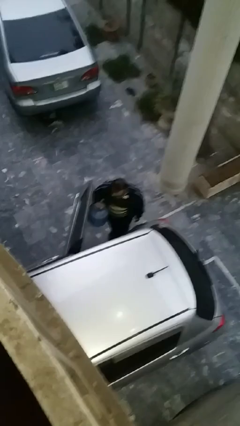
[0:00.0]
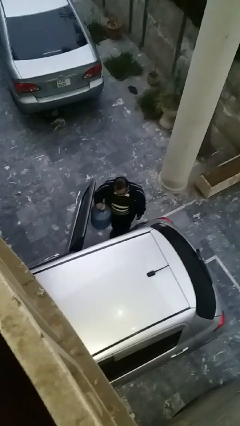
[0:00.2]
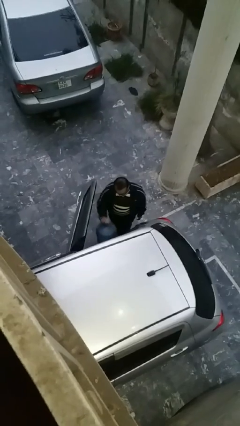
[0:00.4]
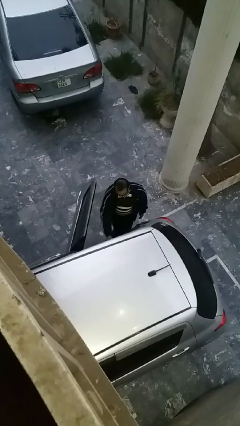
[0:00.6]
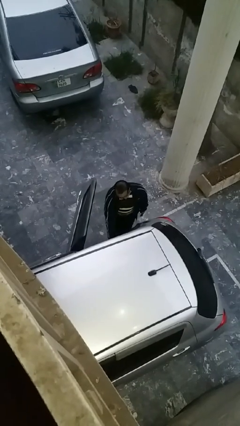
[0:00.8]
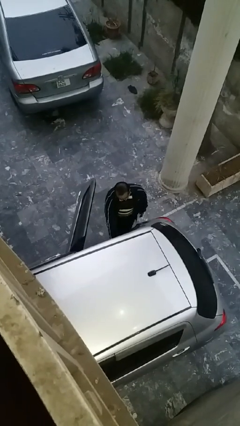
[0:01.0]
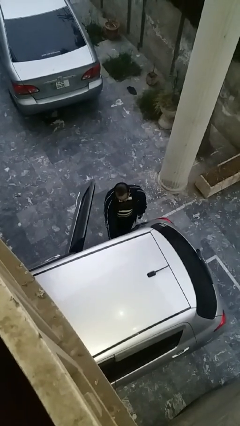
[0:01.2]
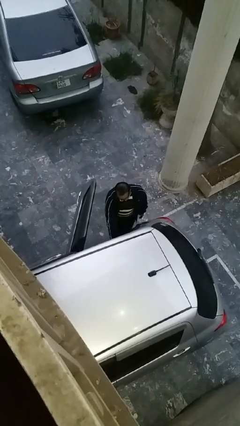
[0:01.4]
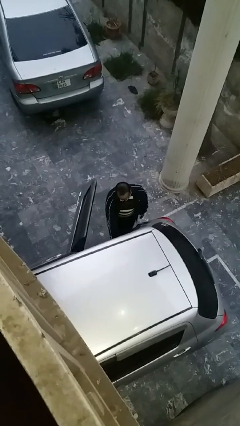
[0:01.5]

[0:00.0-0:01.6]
person loads car

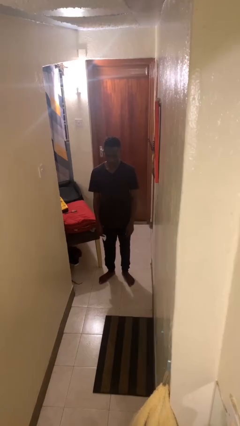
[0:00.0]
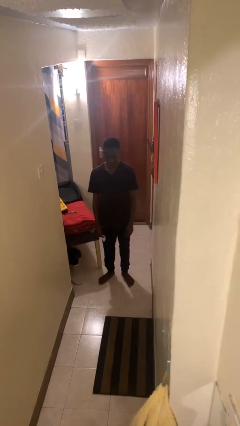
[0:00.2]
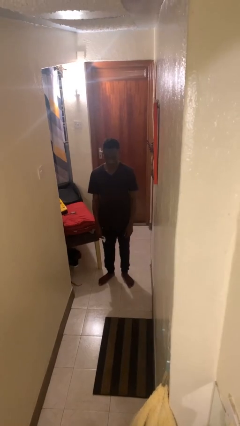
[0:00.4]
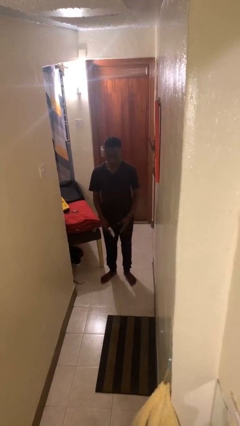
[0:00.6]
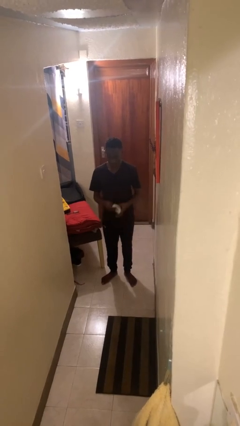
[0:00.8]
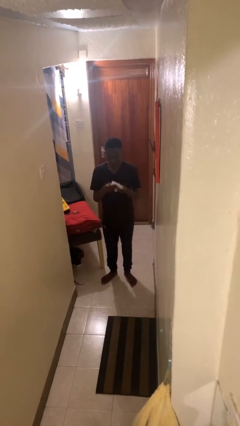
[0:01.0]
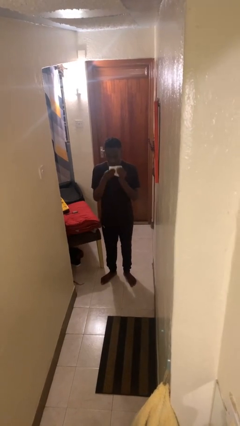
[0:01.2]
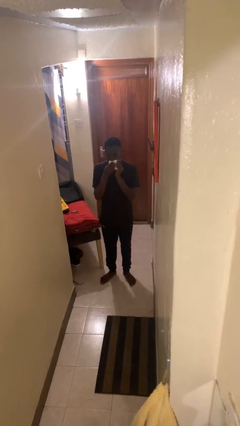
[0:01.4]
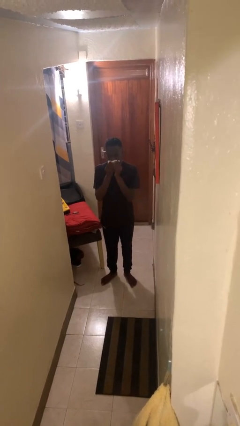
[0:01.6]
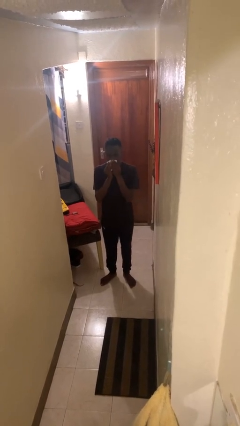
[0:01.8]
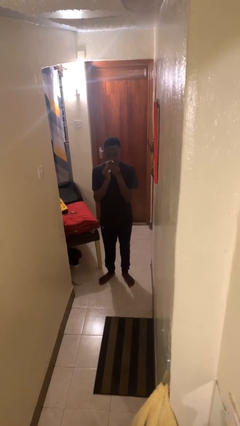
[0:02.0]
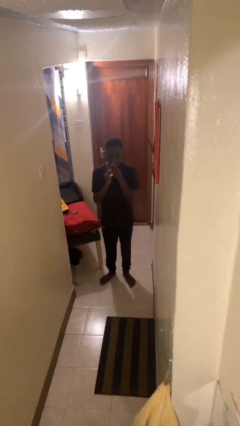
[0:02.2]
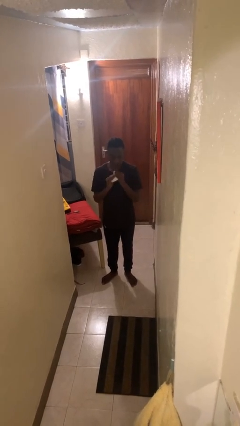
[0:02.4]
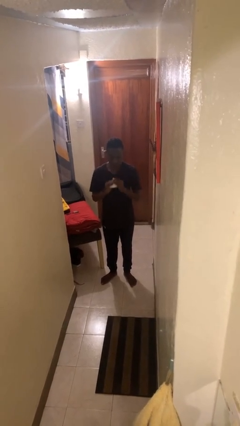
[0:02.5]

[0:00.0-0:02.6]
person wipes mouth with napkin

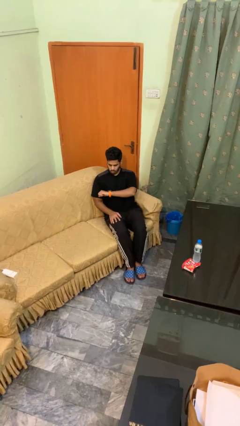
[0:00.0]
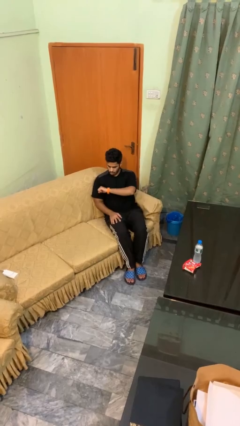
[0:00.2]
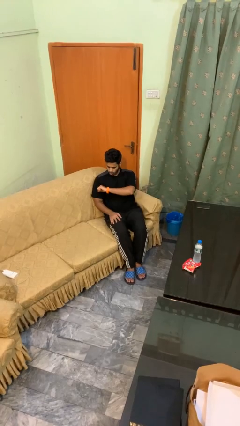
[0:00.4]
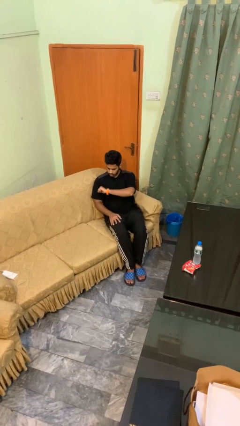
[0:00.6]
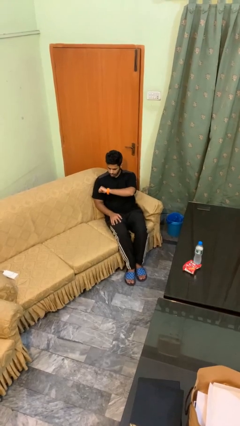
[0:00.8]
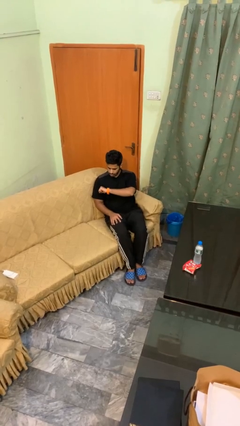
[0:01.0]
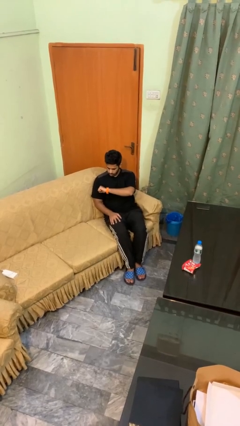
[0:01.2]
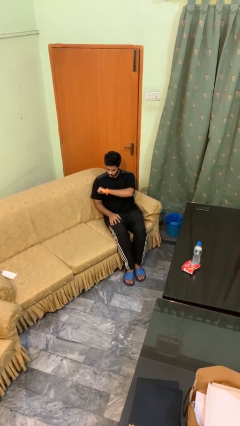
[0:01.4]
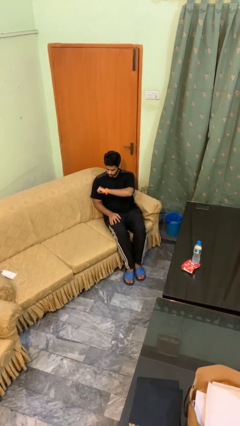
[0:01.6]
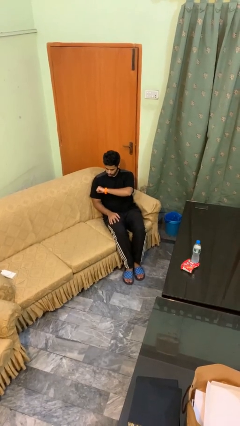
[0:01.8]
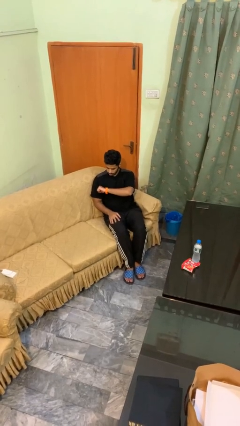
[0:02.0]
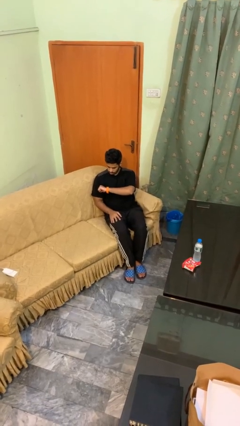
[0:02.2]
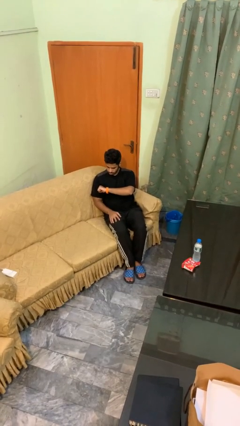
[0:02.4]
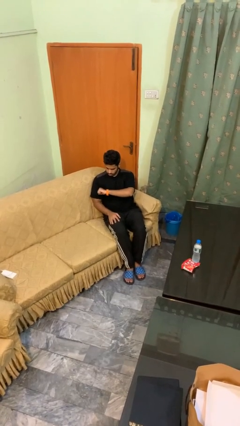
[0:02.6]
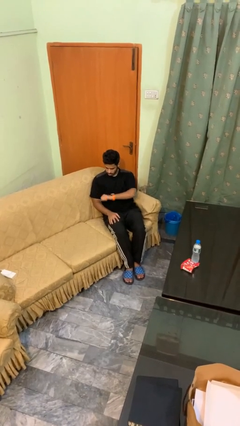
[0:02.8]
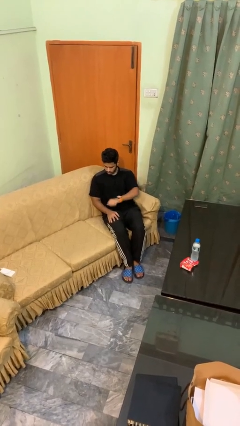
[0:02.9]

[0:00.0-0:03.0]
person looks at wristwatch

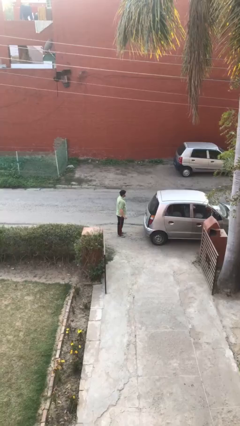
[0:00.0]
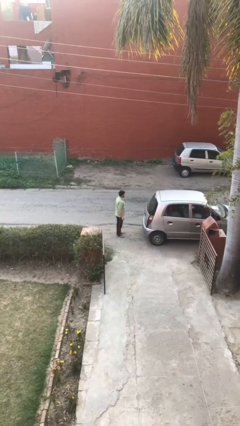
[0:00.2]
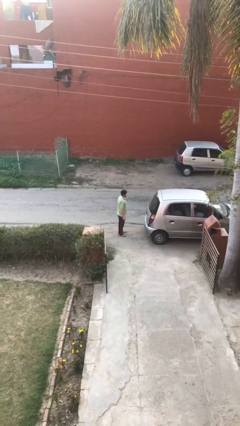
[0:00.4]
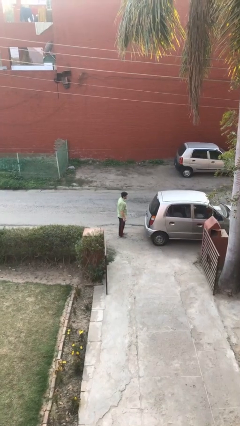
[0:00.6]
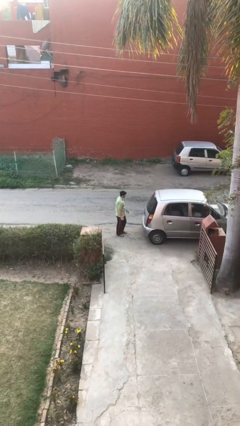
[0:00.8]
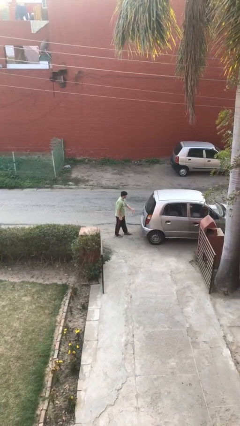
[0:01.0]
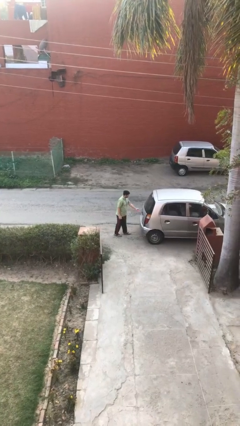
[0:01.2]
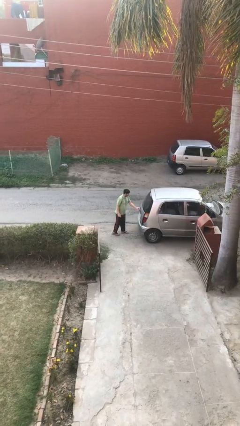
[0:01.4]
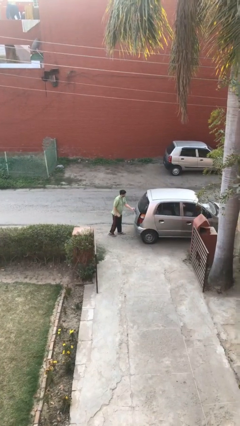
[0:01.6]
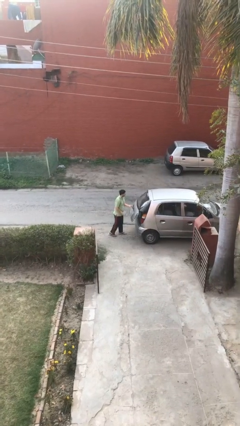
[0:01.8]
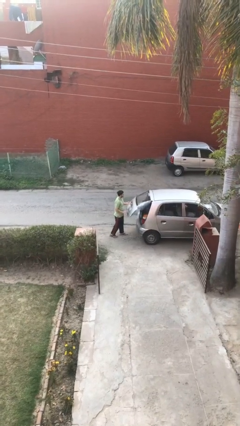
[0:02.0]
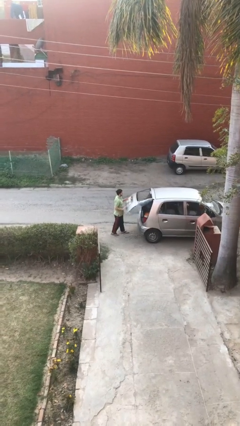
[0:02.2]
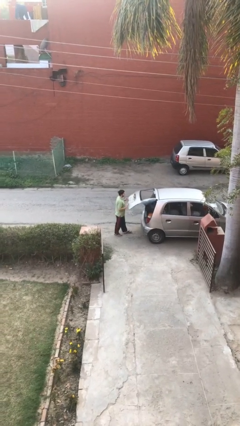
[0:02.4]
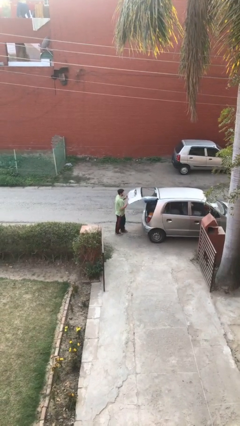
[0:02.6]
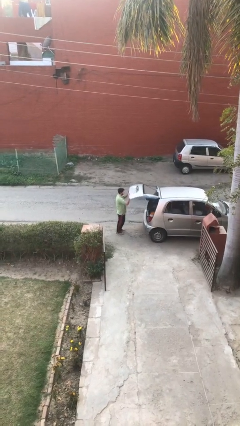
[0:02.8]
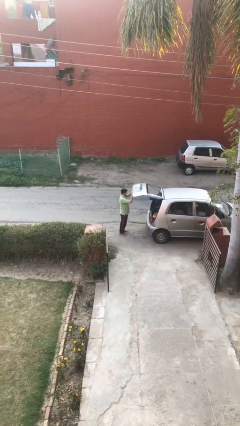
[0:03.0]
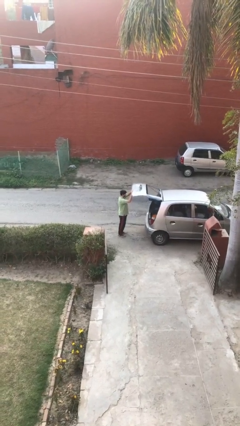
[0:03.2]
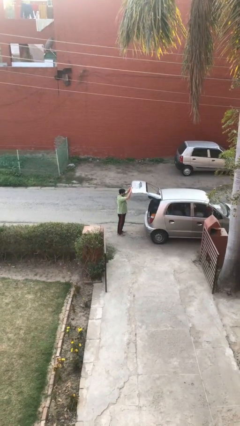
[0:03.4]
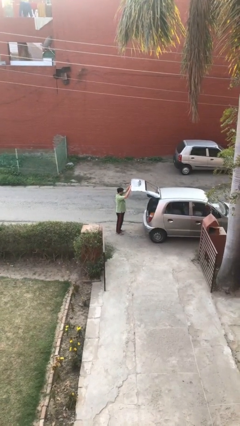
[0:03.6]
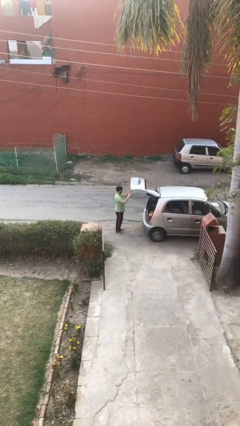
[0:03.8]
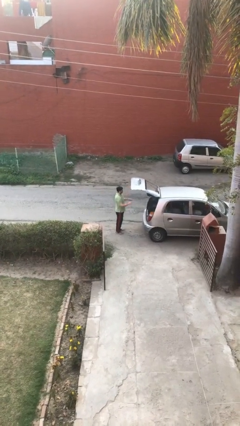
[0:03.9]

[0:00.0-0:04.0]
person opens car trunk

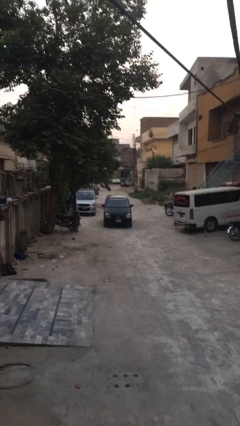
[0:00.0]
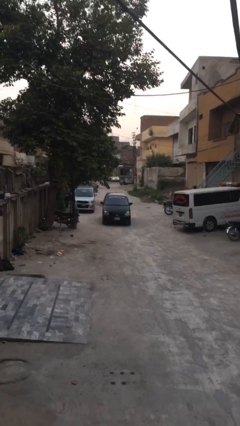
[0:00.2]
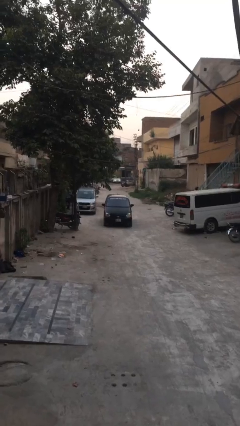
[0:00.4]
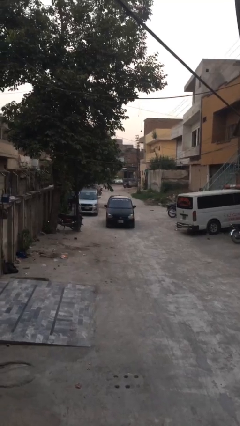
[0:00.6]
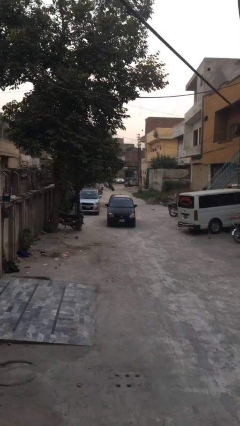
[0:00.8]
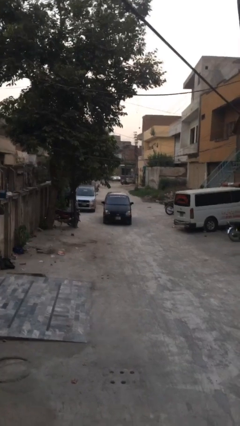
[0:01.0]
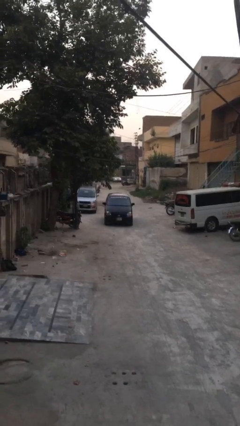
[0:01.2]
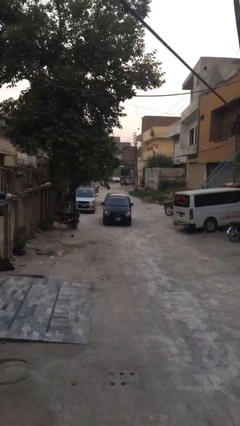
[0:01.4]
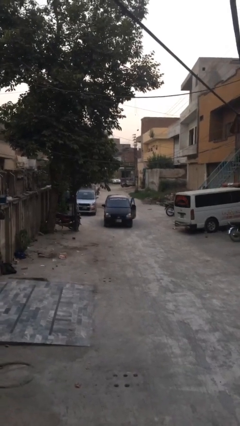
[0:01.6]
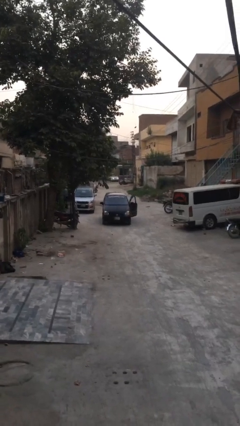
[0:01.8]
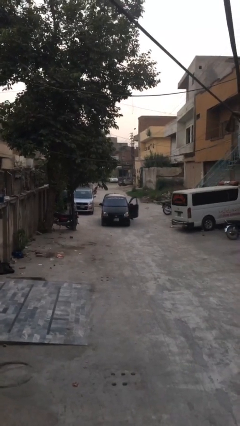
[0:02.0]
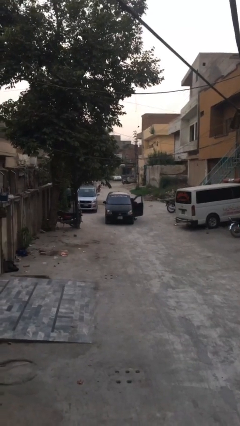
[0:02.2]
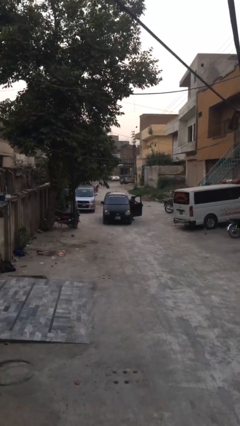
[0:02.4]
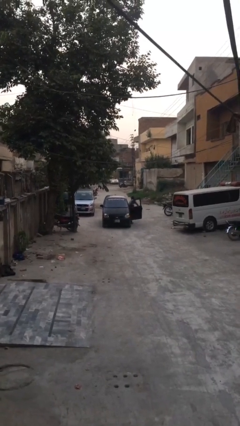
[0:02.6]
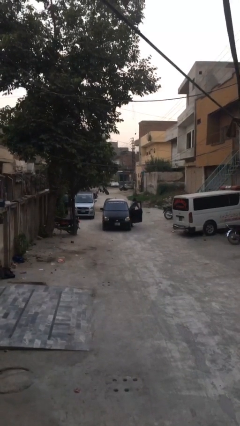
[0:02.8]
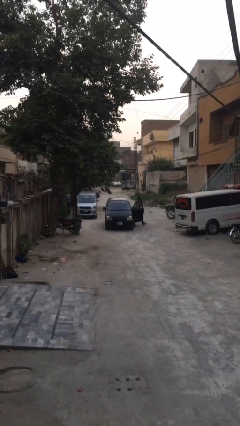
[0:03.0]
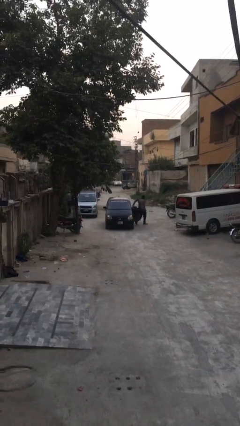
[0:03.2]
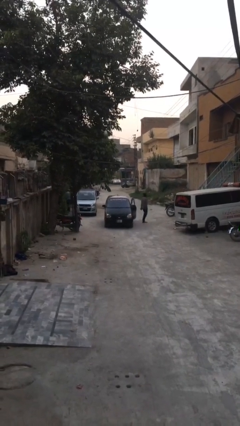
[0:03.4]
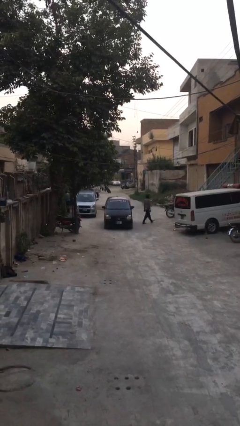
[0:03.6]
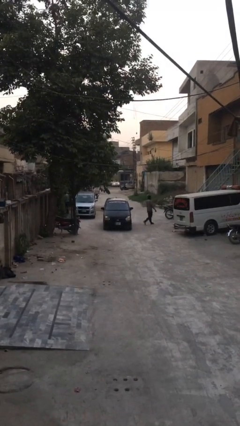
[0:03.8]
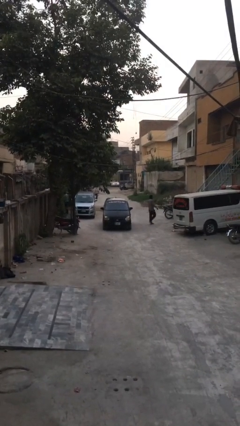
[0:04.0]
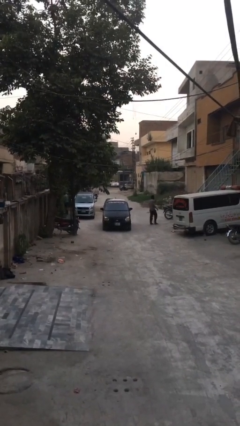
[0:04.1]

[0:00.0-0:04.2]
car drops off person

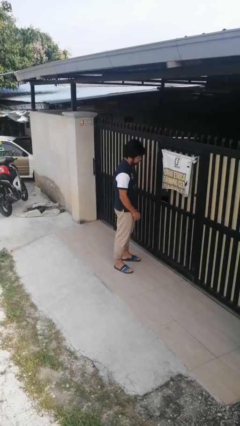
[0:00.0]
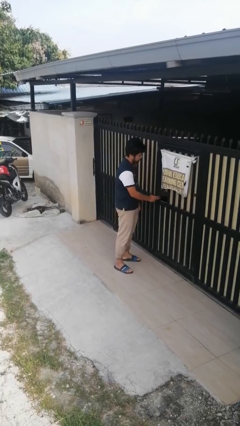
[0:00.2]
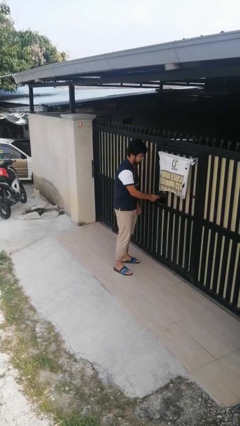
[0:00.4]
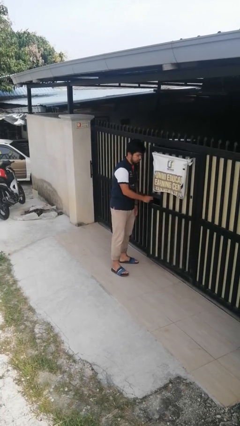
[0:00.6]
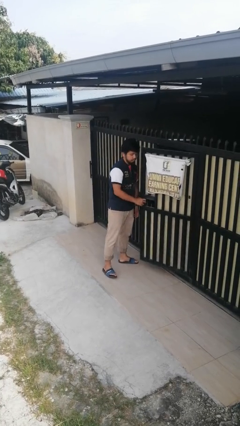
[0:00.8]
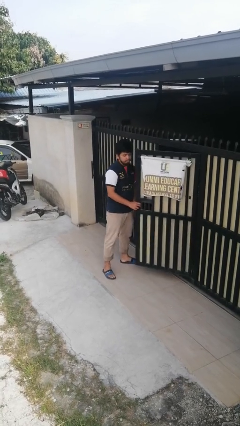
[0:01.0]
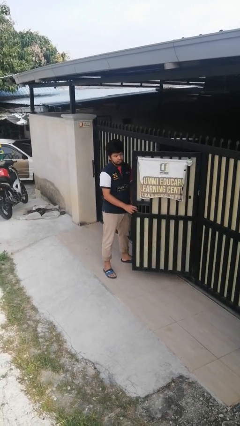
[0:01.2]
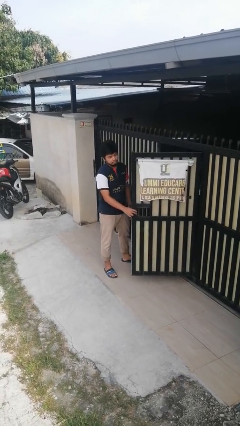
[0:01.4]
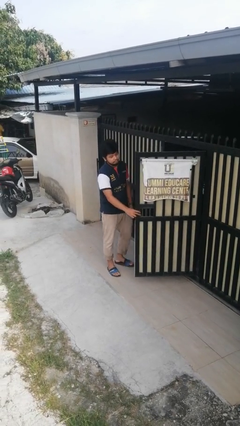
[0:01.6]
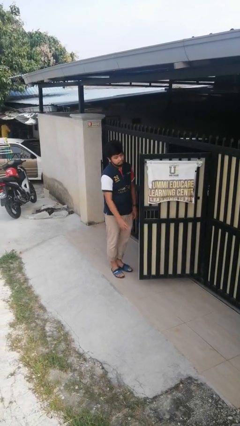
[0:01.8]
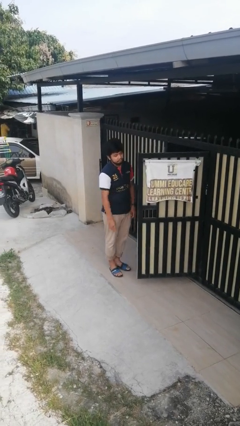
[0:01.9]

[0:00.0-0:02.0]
person opens gate
